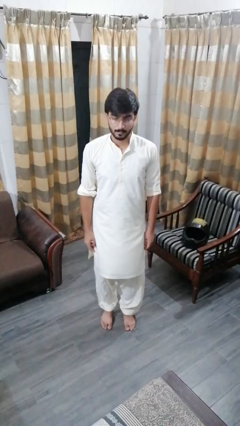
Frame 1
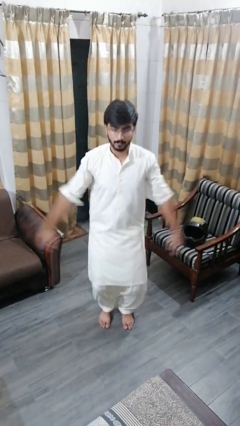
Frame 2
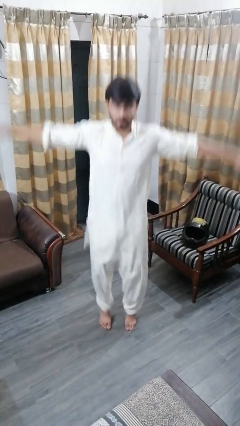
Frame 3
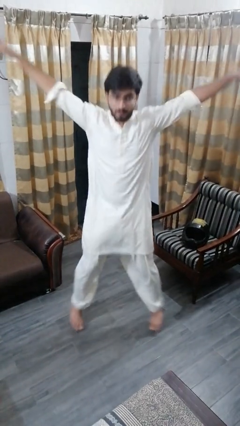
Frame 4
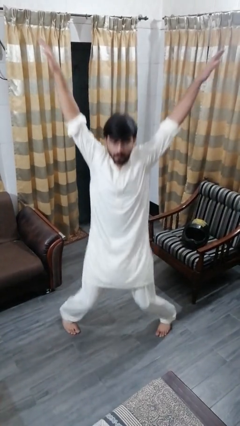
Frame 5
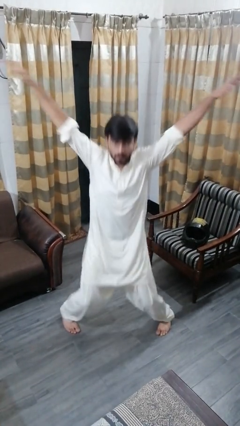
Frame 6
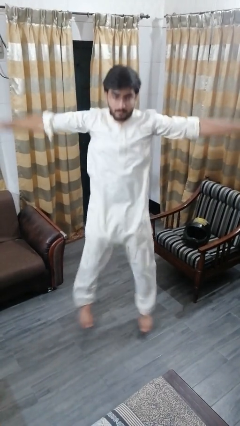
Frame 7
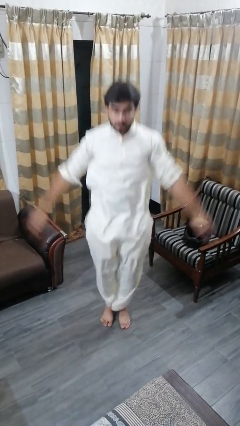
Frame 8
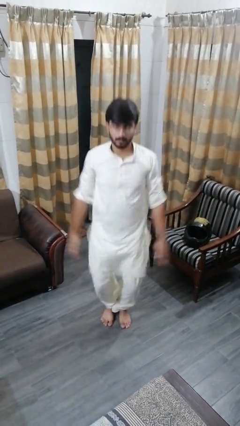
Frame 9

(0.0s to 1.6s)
person exercises with jumping jacks

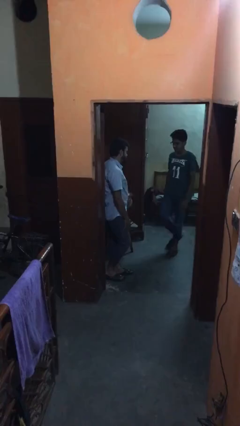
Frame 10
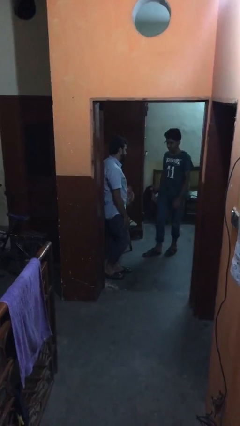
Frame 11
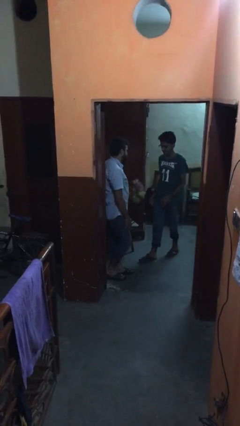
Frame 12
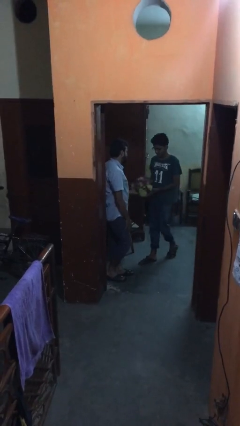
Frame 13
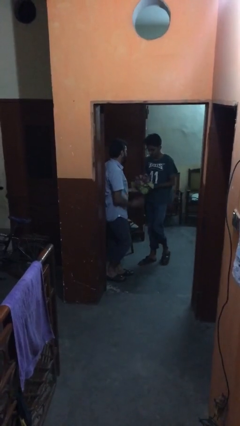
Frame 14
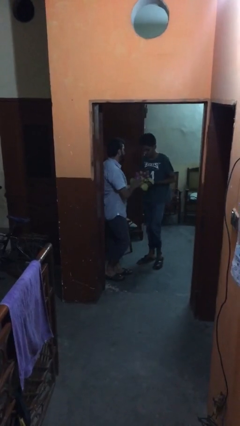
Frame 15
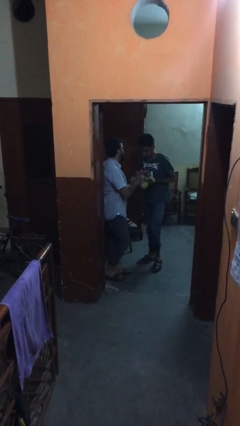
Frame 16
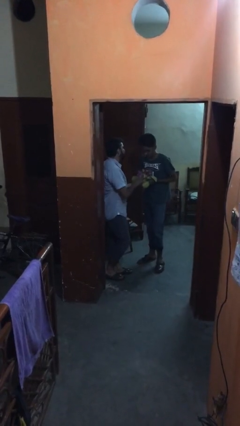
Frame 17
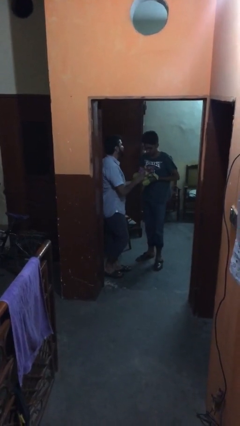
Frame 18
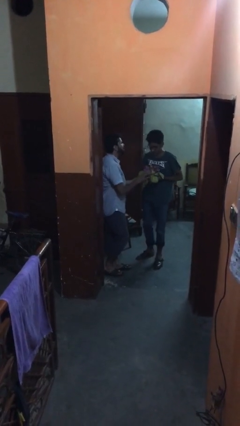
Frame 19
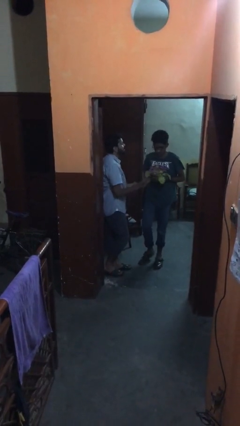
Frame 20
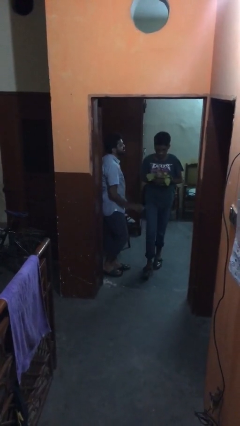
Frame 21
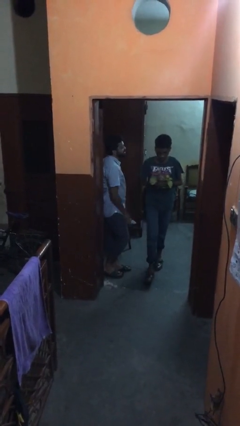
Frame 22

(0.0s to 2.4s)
person transfers object to person

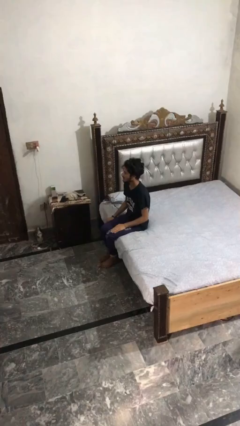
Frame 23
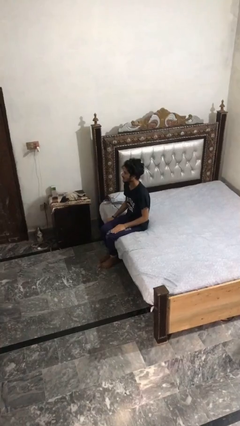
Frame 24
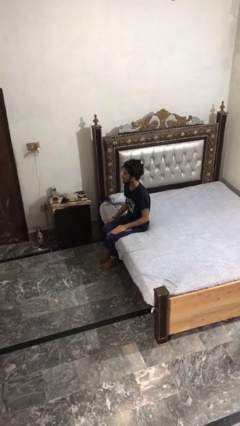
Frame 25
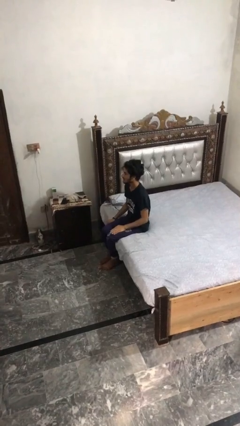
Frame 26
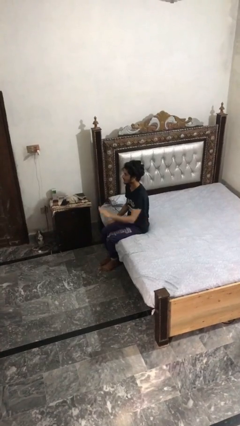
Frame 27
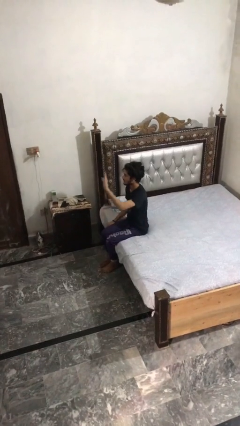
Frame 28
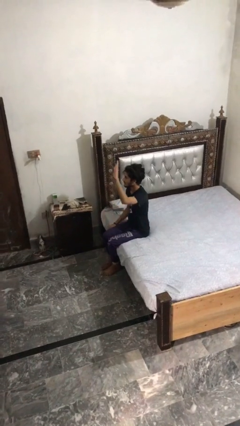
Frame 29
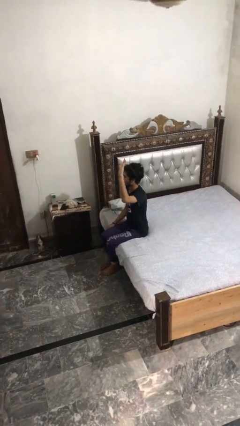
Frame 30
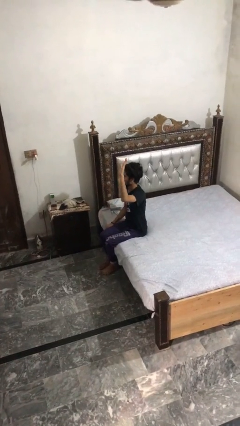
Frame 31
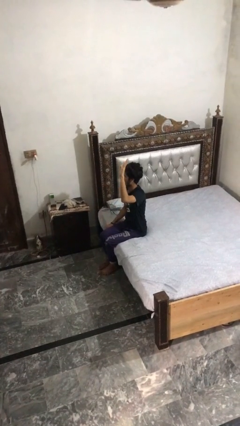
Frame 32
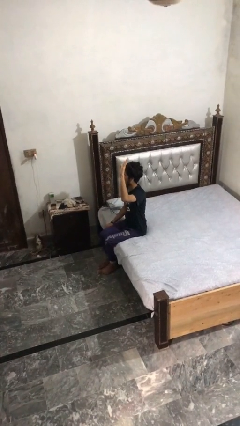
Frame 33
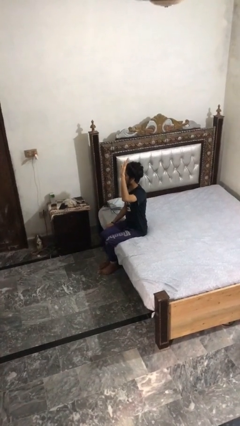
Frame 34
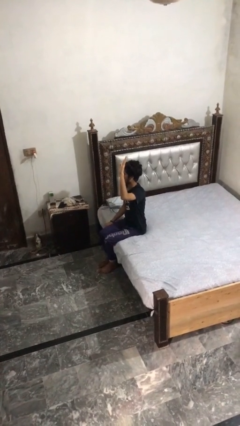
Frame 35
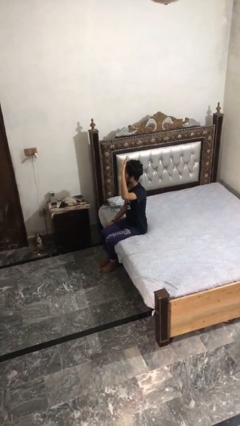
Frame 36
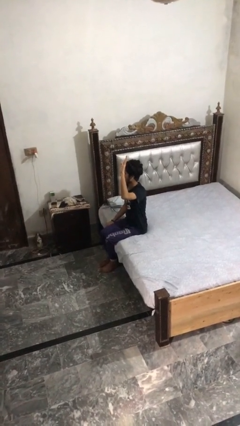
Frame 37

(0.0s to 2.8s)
person gestures raise hand

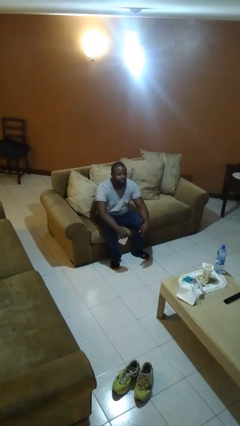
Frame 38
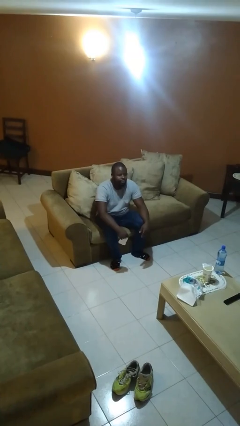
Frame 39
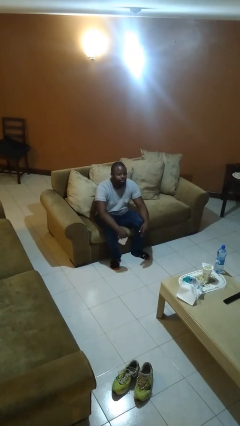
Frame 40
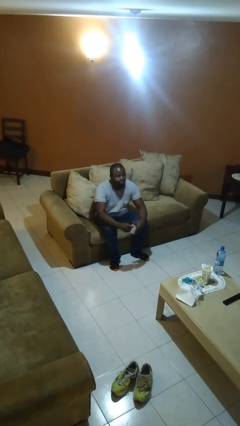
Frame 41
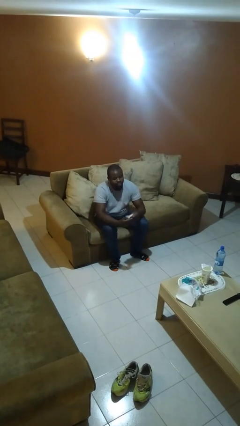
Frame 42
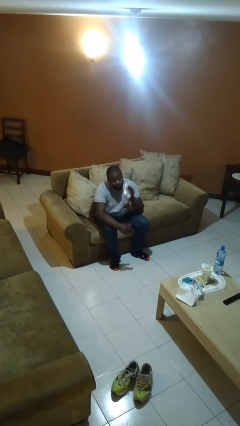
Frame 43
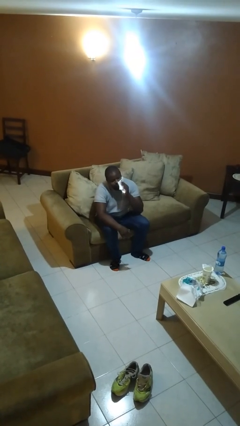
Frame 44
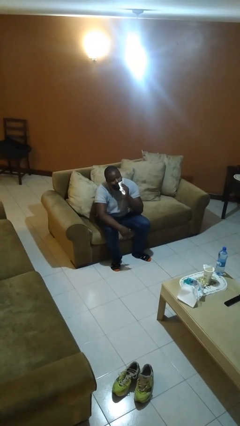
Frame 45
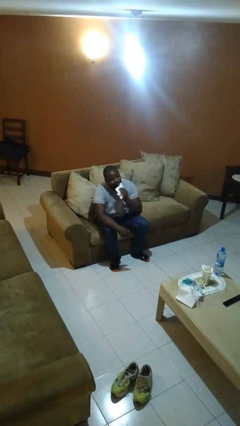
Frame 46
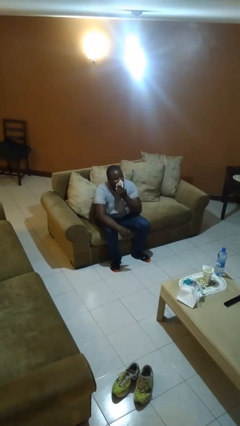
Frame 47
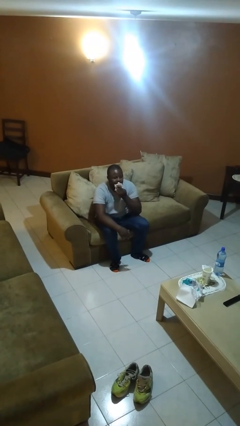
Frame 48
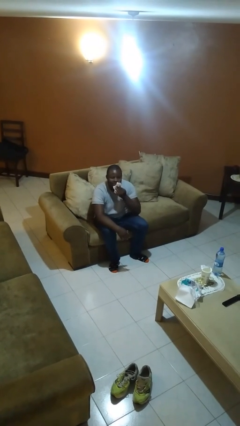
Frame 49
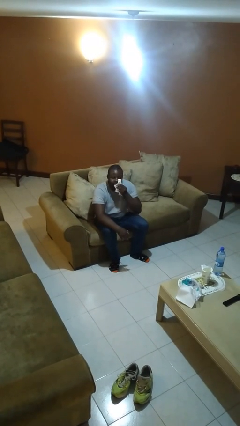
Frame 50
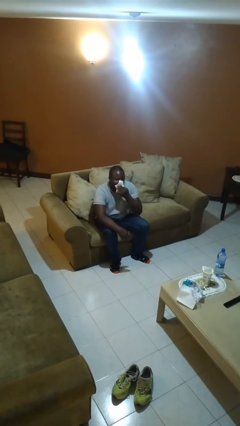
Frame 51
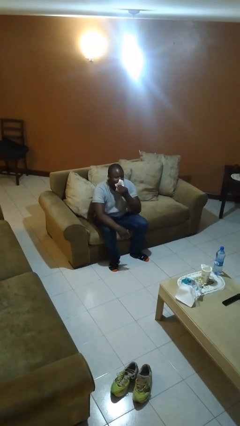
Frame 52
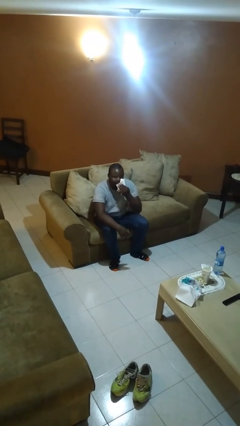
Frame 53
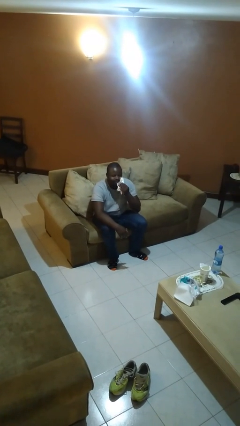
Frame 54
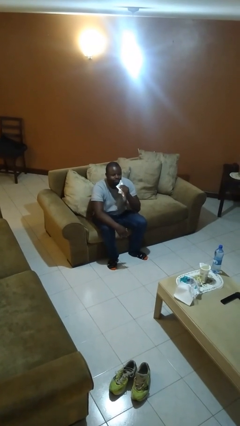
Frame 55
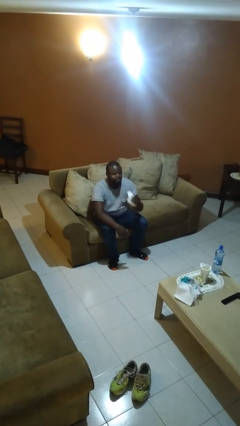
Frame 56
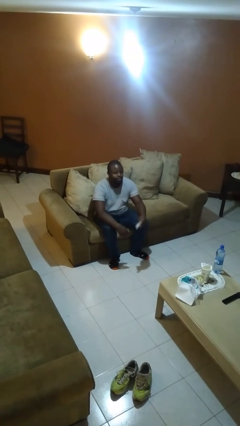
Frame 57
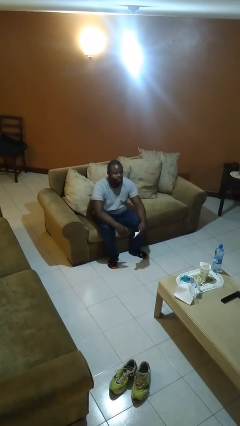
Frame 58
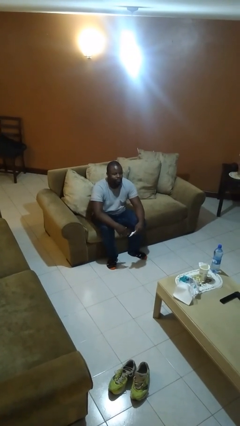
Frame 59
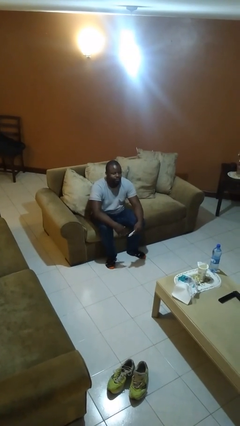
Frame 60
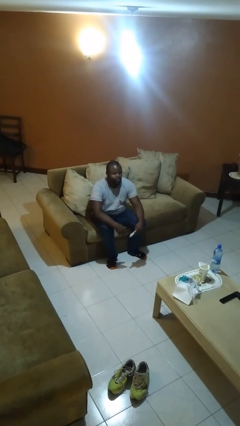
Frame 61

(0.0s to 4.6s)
person wipes mouth with napkin

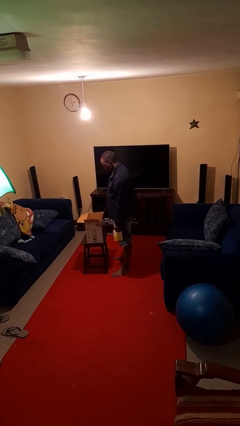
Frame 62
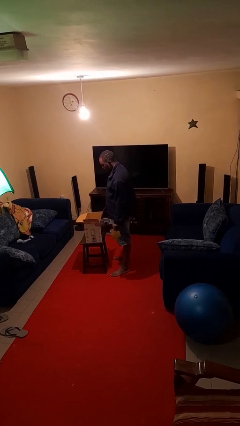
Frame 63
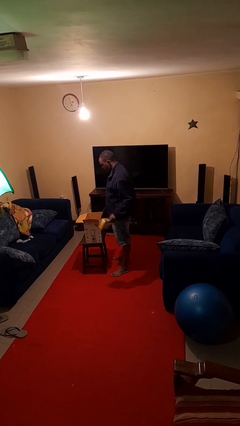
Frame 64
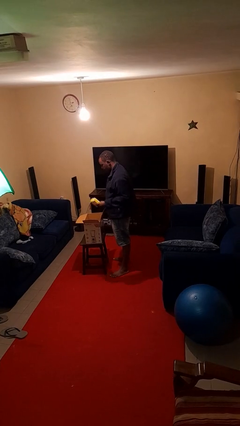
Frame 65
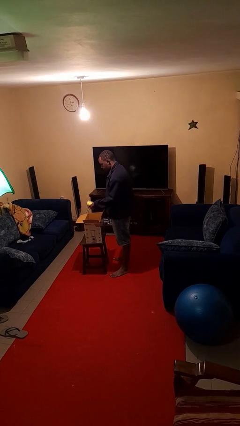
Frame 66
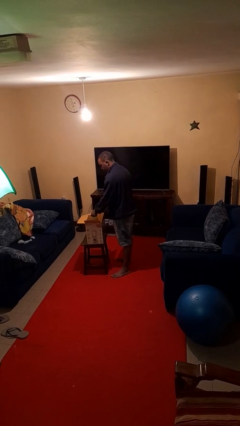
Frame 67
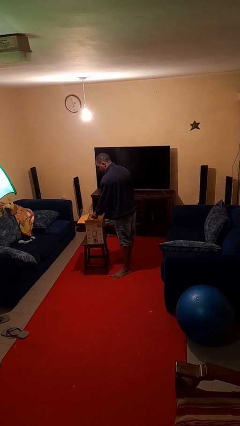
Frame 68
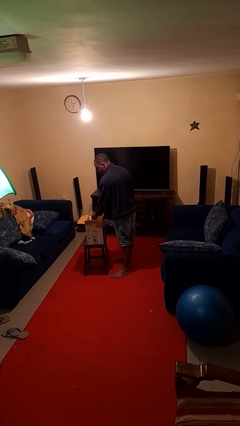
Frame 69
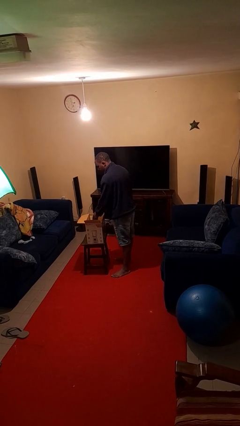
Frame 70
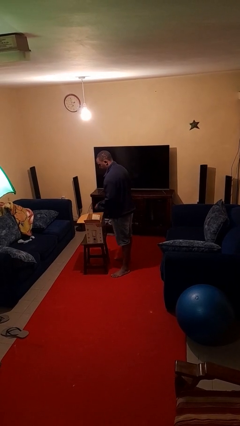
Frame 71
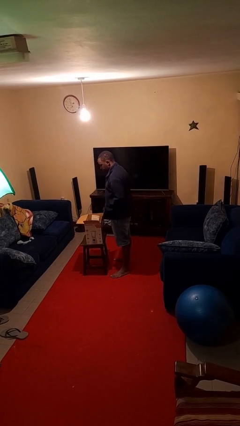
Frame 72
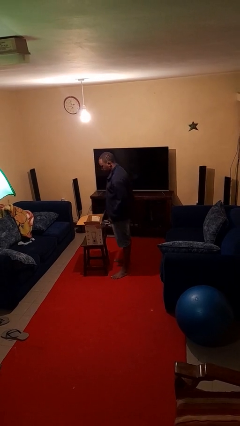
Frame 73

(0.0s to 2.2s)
person puts object into box

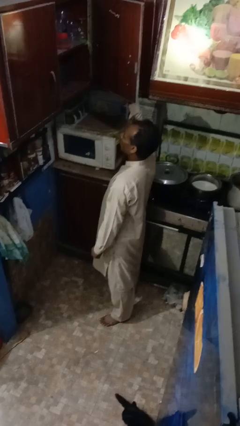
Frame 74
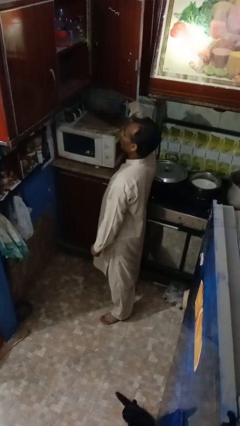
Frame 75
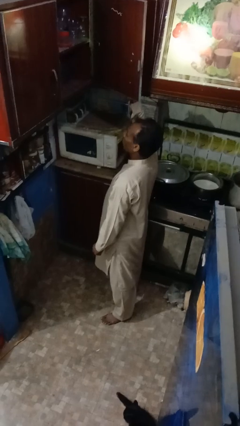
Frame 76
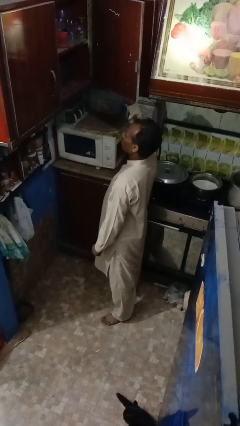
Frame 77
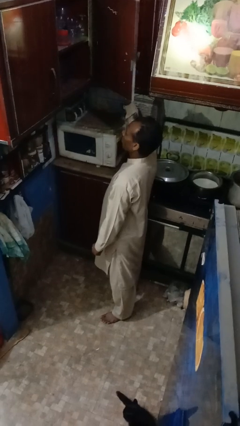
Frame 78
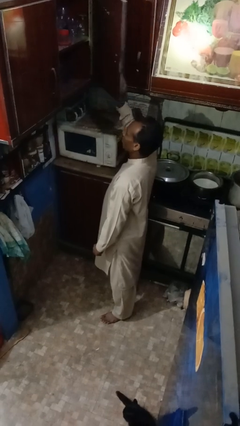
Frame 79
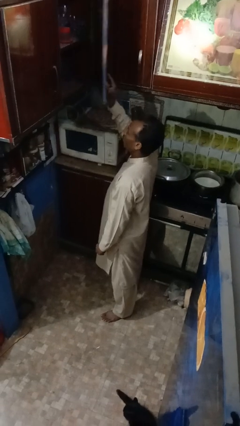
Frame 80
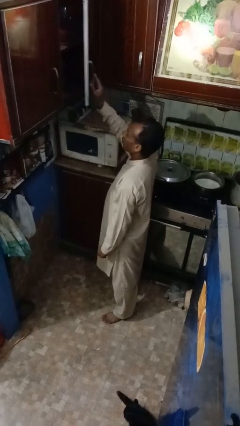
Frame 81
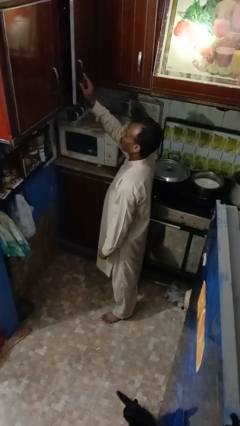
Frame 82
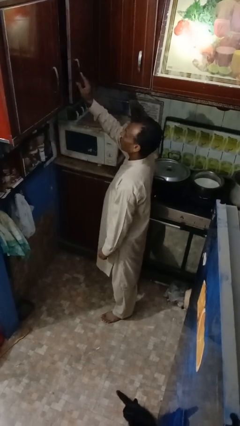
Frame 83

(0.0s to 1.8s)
person closes cabinet

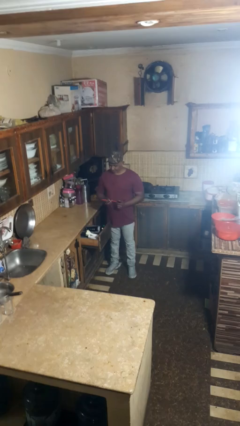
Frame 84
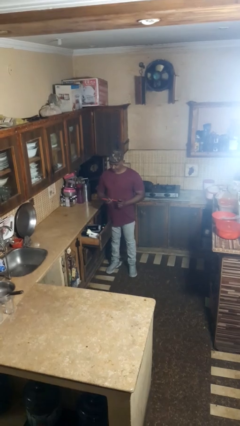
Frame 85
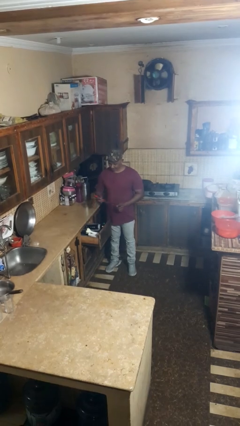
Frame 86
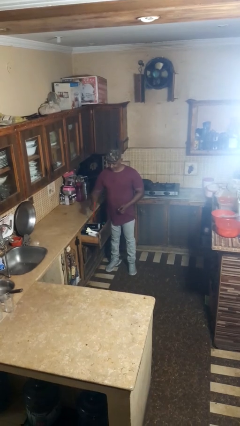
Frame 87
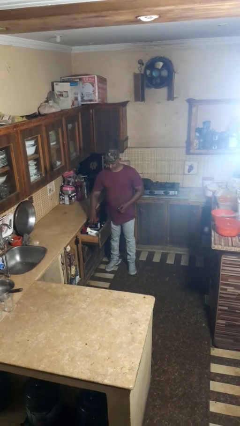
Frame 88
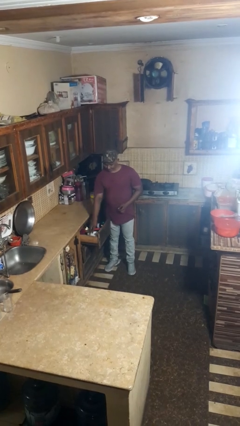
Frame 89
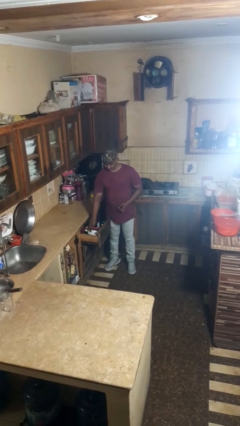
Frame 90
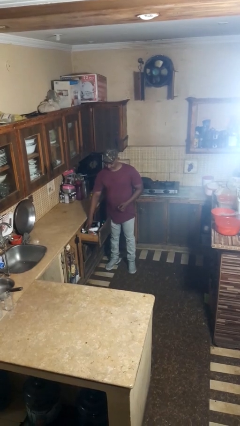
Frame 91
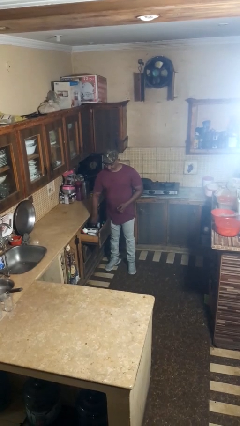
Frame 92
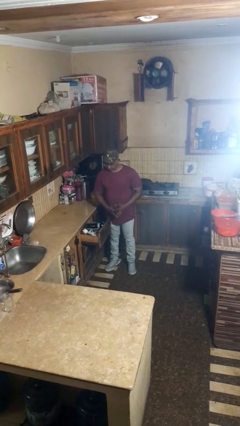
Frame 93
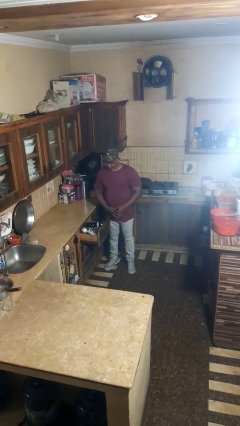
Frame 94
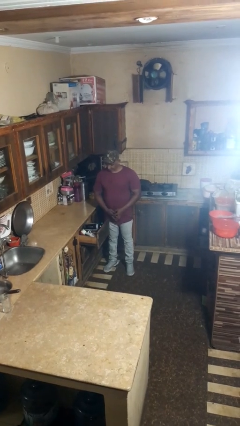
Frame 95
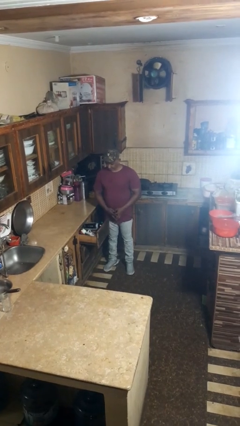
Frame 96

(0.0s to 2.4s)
person puts object into kitchen drawer
